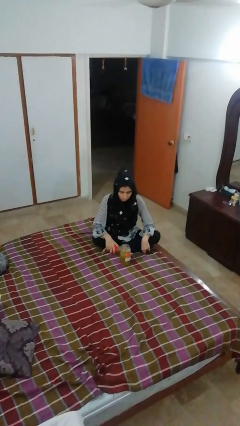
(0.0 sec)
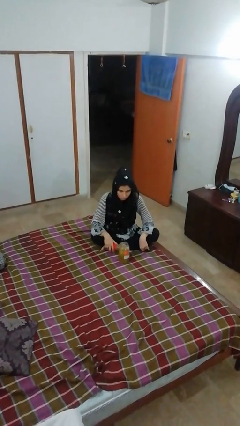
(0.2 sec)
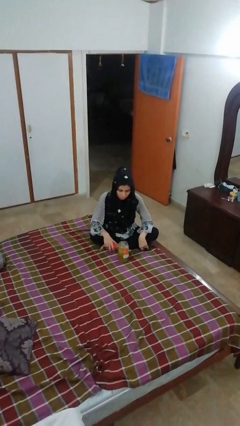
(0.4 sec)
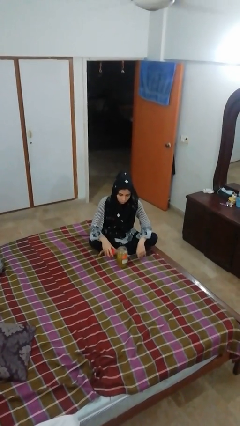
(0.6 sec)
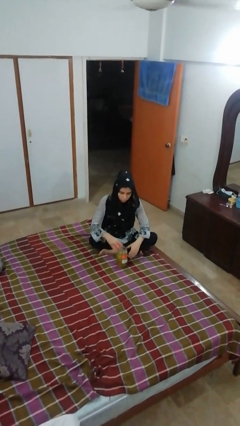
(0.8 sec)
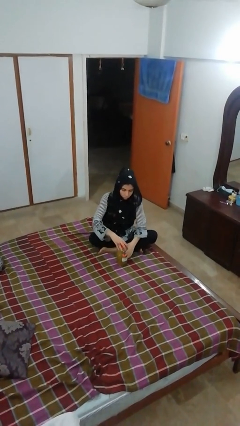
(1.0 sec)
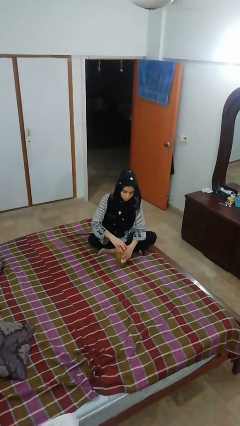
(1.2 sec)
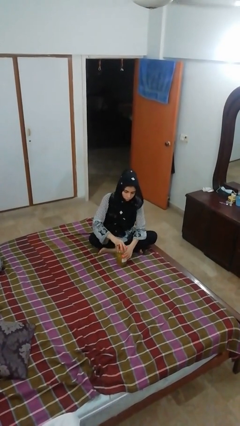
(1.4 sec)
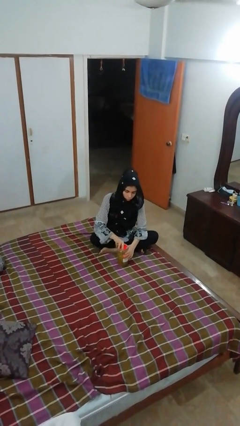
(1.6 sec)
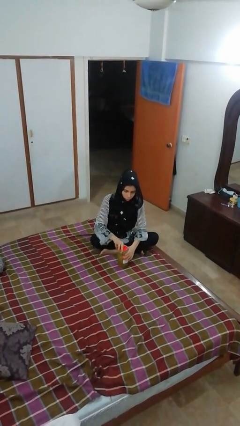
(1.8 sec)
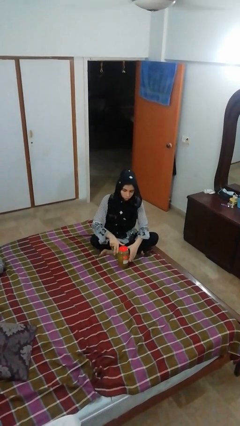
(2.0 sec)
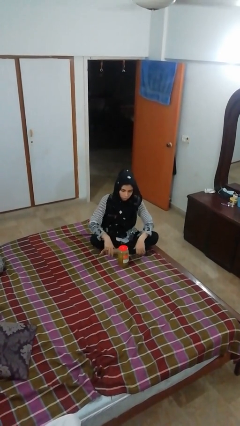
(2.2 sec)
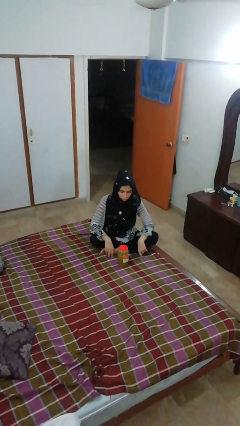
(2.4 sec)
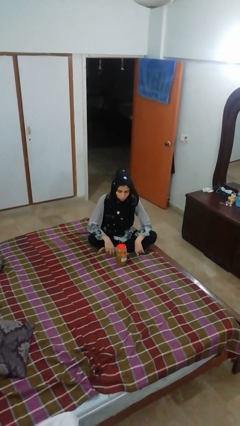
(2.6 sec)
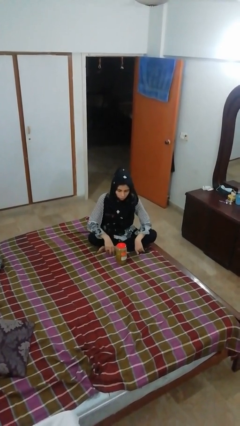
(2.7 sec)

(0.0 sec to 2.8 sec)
person closes jar

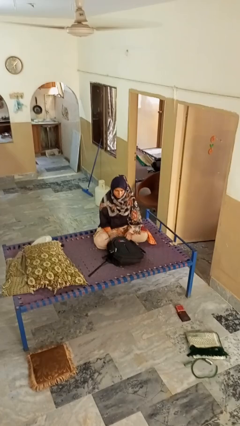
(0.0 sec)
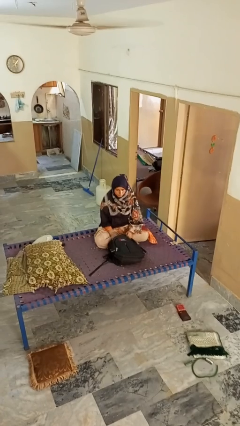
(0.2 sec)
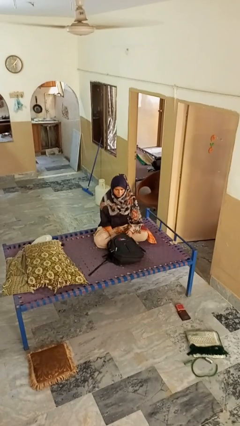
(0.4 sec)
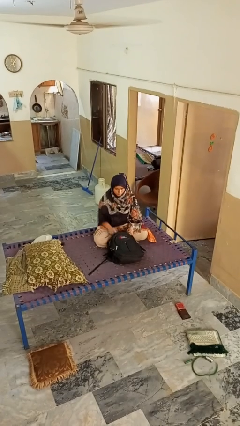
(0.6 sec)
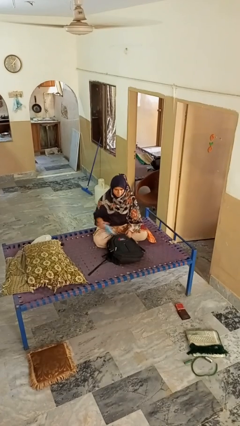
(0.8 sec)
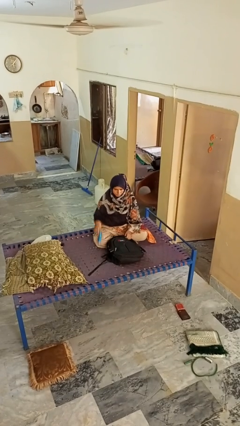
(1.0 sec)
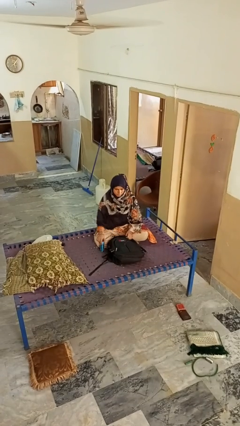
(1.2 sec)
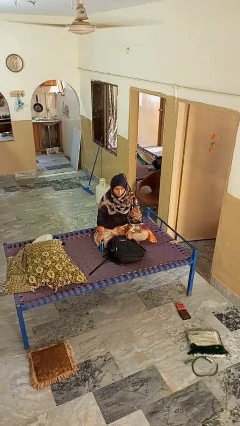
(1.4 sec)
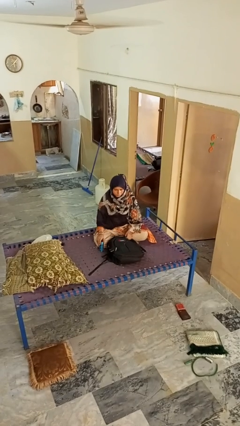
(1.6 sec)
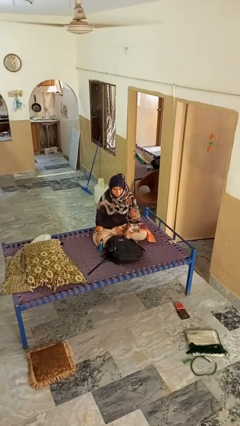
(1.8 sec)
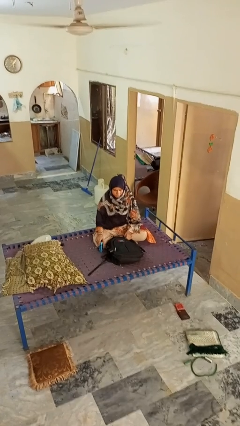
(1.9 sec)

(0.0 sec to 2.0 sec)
person takes object from bag

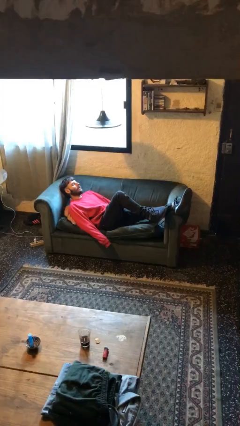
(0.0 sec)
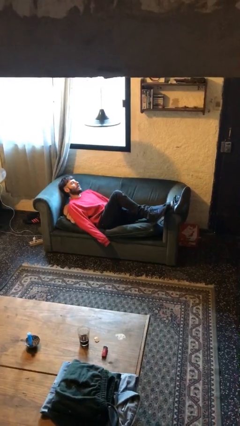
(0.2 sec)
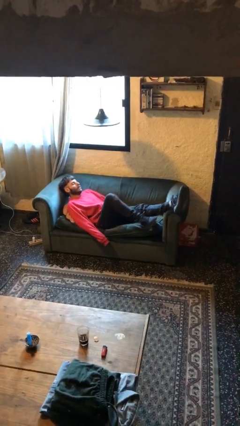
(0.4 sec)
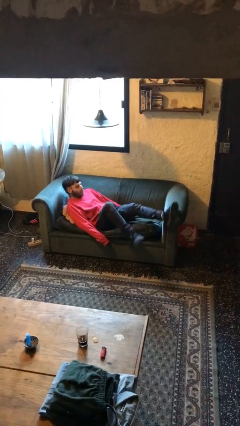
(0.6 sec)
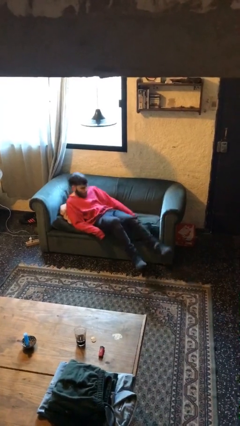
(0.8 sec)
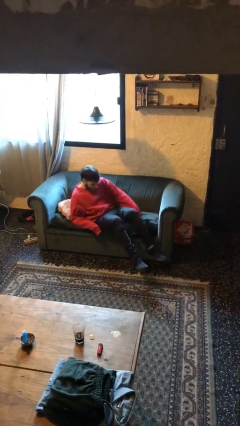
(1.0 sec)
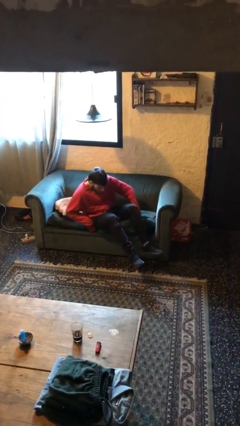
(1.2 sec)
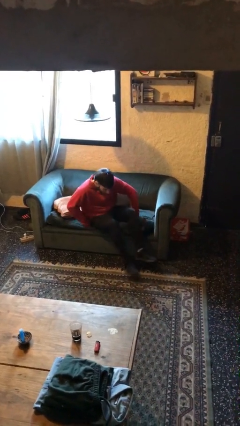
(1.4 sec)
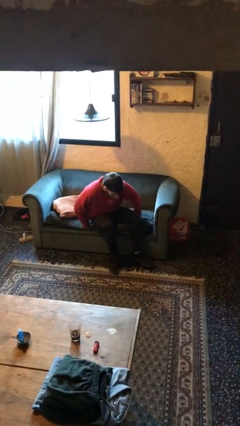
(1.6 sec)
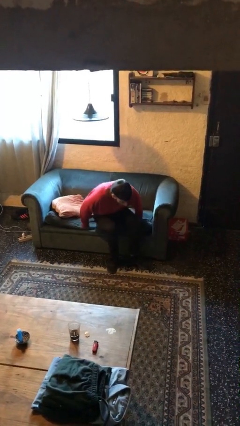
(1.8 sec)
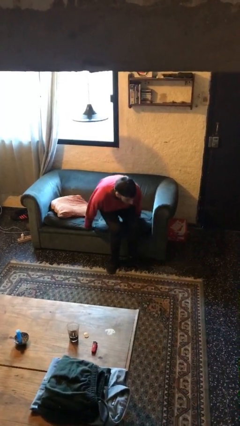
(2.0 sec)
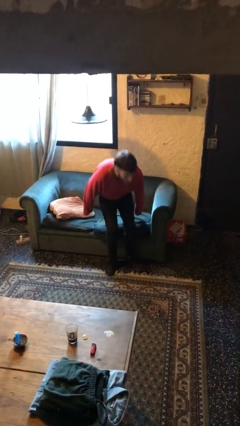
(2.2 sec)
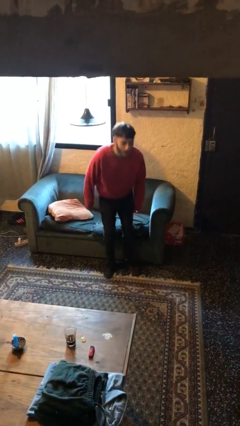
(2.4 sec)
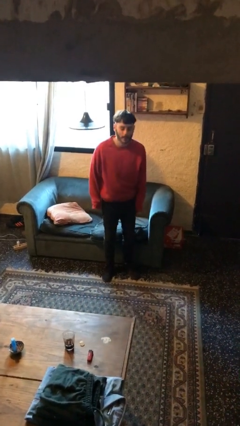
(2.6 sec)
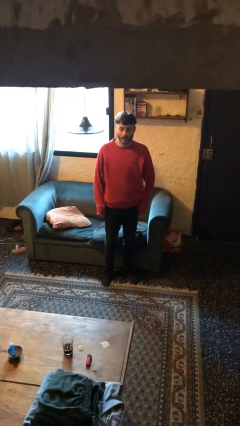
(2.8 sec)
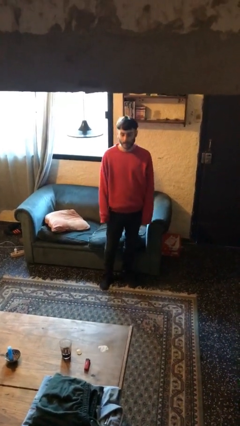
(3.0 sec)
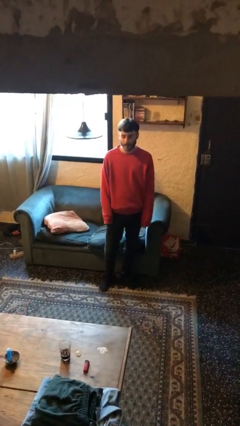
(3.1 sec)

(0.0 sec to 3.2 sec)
person stands up

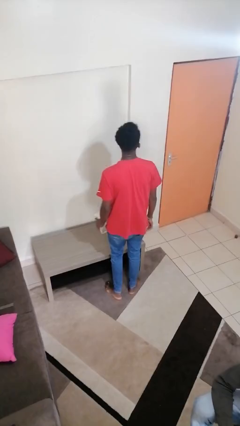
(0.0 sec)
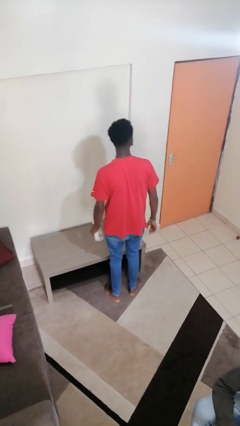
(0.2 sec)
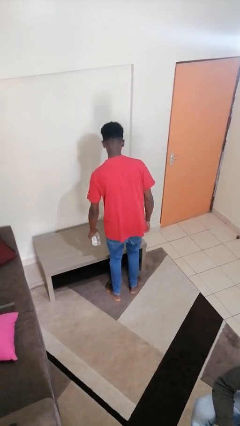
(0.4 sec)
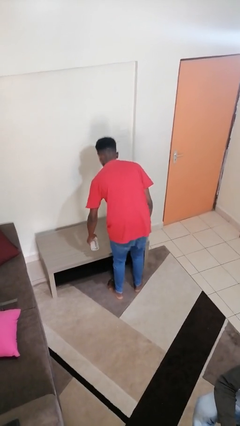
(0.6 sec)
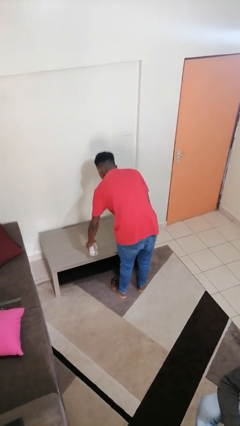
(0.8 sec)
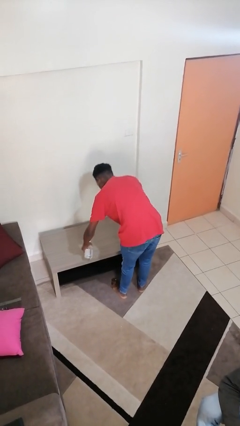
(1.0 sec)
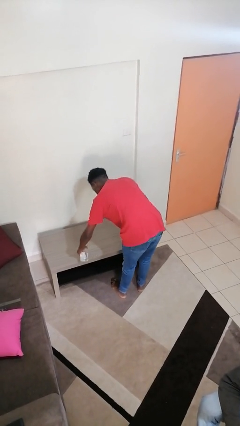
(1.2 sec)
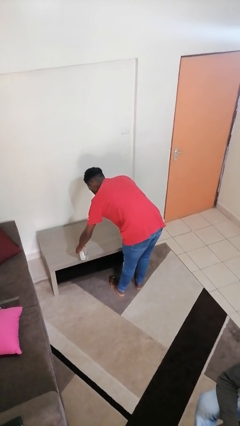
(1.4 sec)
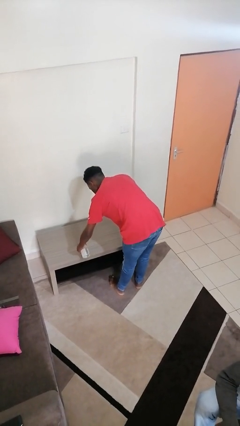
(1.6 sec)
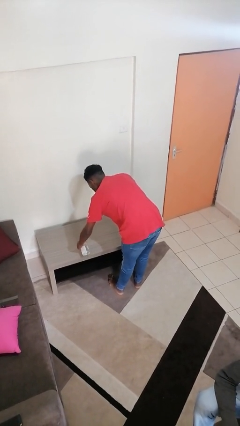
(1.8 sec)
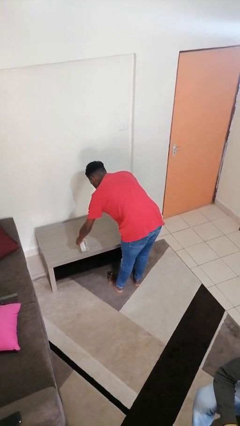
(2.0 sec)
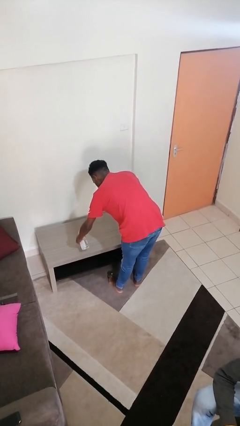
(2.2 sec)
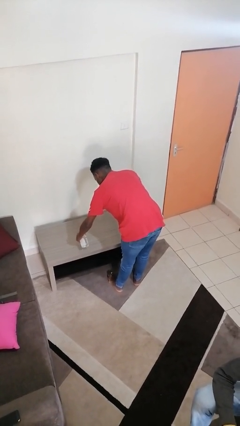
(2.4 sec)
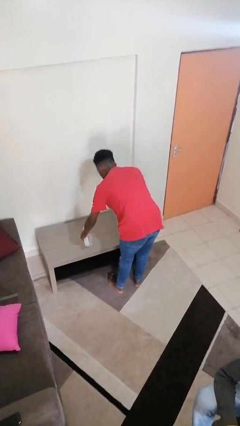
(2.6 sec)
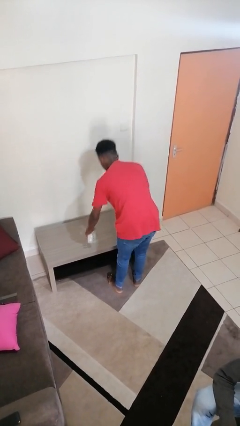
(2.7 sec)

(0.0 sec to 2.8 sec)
person sprays from bottle

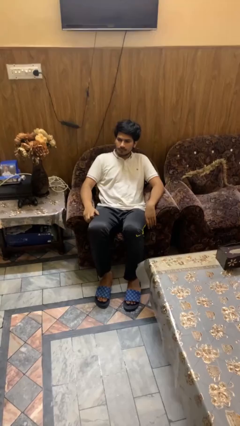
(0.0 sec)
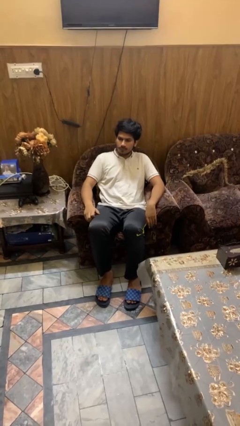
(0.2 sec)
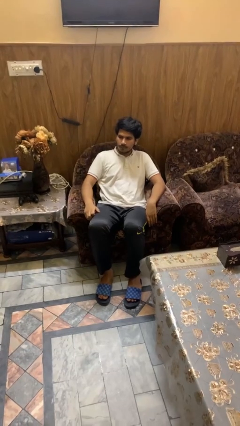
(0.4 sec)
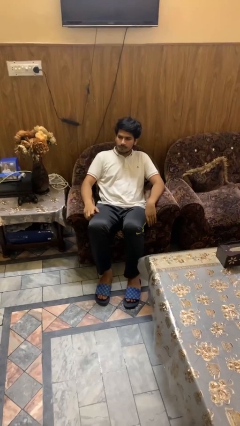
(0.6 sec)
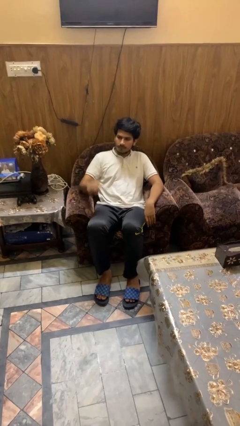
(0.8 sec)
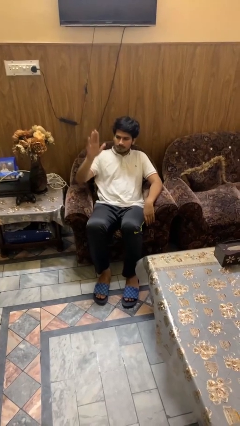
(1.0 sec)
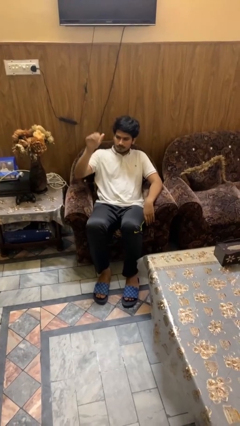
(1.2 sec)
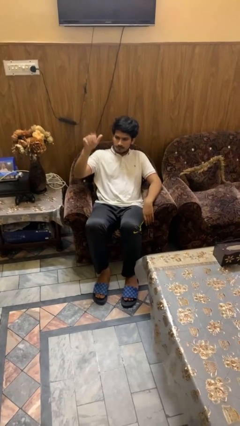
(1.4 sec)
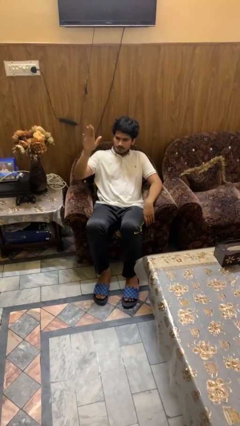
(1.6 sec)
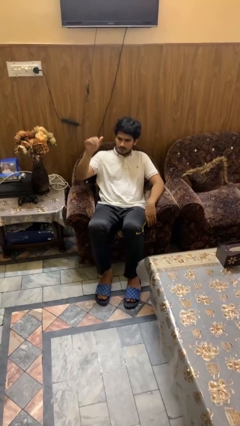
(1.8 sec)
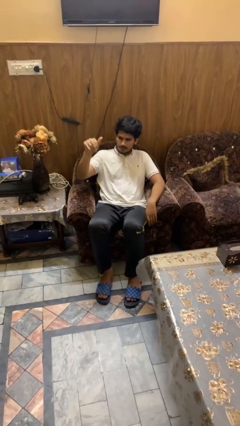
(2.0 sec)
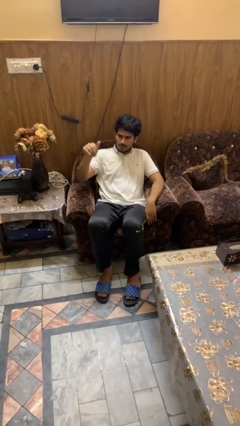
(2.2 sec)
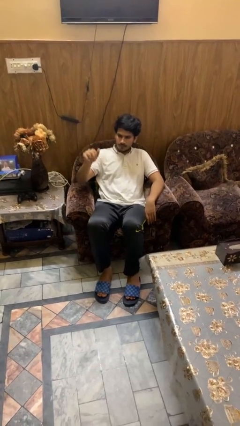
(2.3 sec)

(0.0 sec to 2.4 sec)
person gestures come here

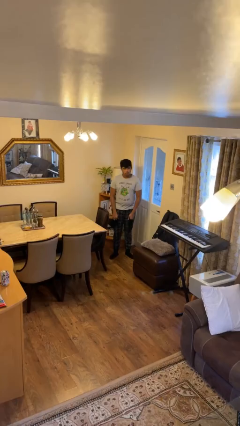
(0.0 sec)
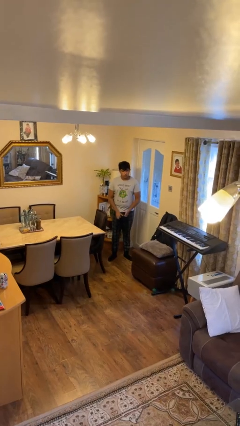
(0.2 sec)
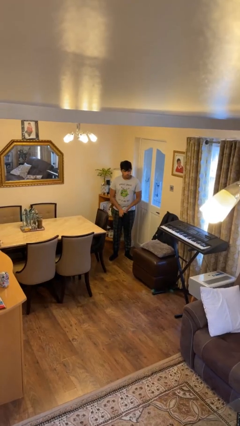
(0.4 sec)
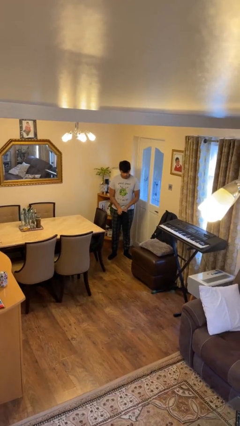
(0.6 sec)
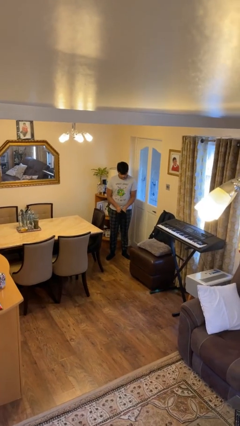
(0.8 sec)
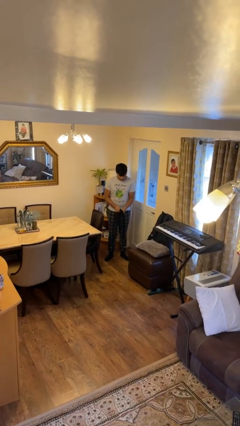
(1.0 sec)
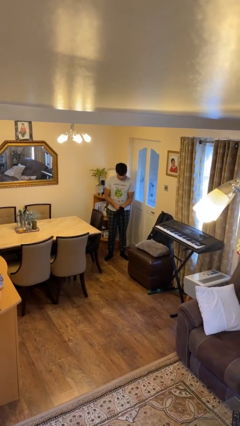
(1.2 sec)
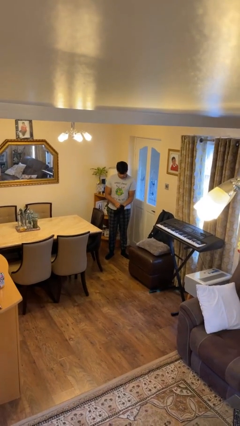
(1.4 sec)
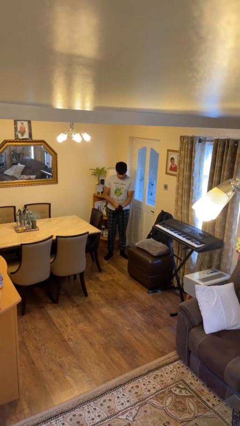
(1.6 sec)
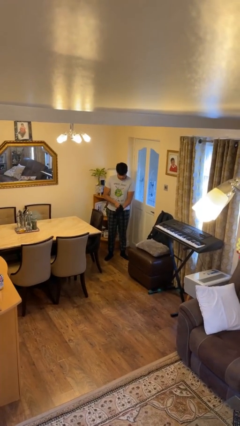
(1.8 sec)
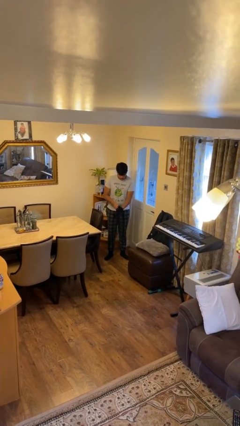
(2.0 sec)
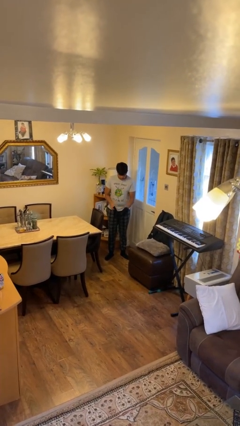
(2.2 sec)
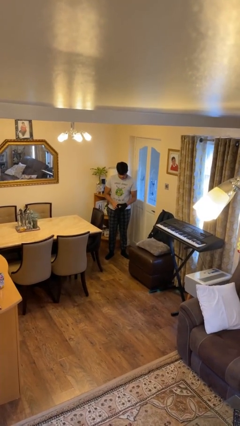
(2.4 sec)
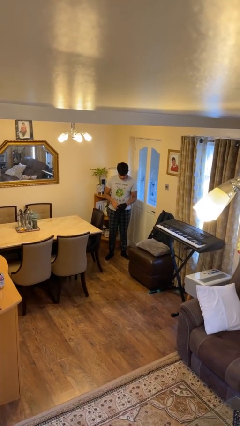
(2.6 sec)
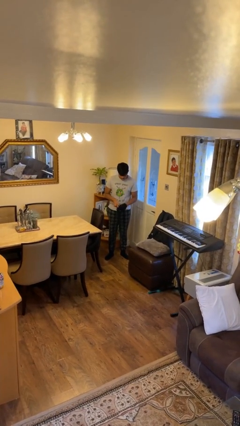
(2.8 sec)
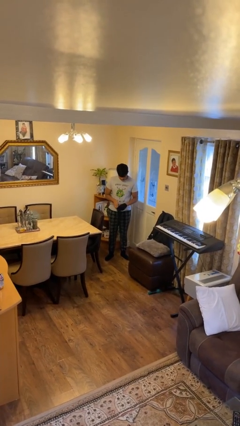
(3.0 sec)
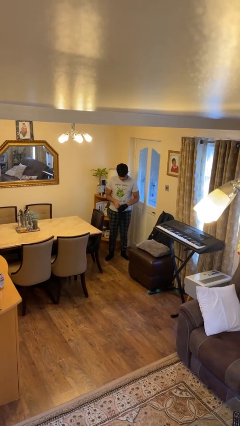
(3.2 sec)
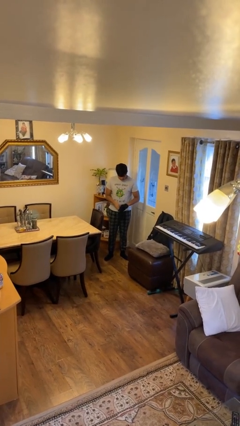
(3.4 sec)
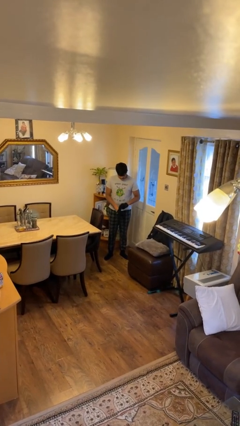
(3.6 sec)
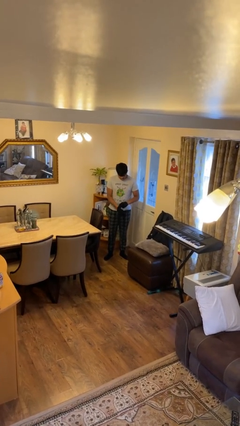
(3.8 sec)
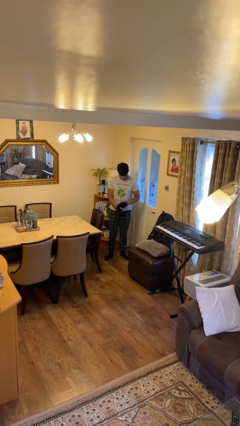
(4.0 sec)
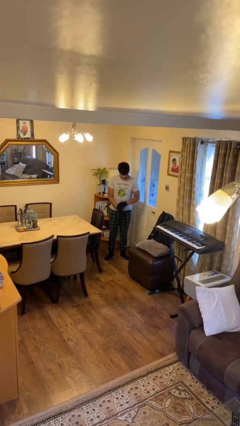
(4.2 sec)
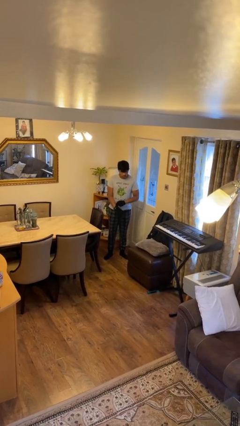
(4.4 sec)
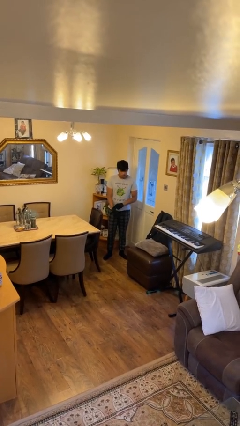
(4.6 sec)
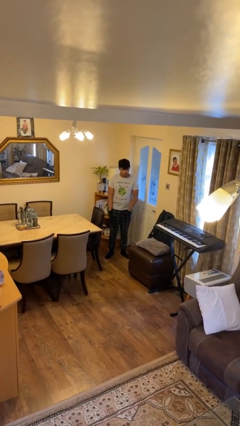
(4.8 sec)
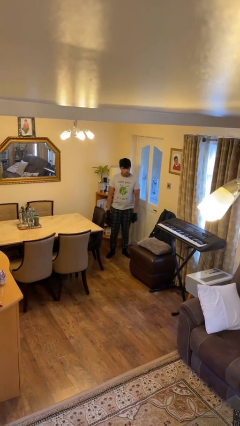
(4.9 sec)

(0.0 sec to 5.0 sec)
person puts on gloves
